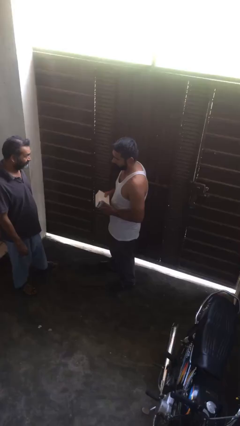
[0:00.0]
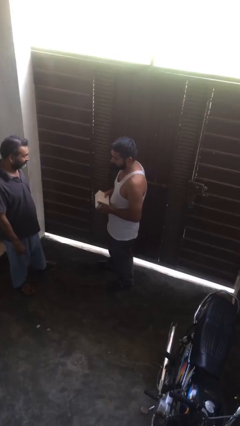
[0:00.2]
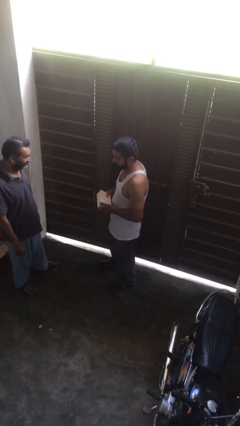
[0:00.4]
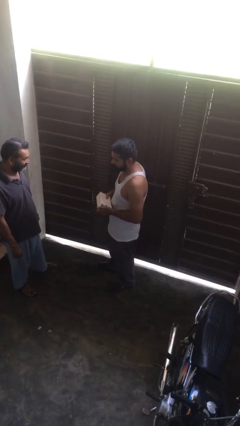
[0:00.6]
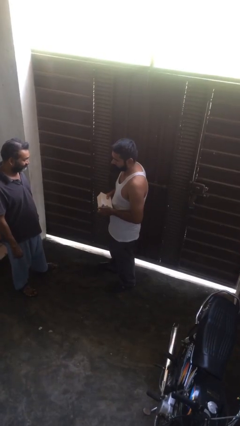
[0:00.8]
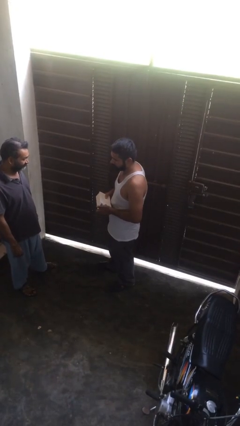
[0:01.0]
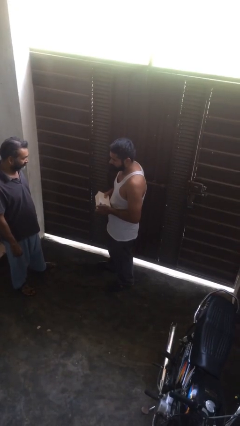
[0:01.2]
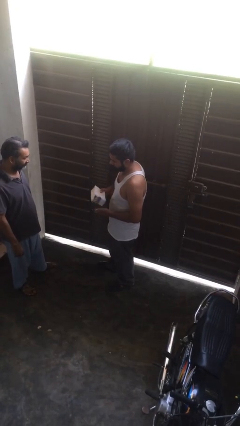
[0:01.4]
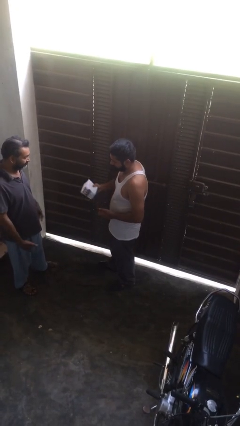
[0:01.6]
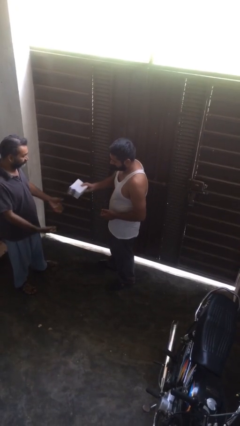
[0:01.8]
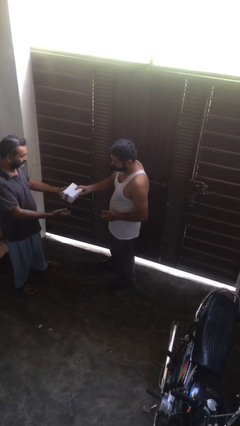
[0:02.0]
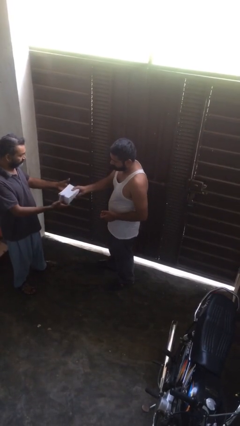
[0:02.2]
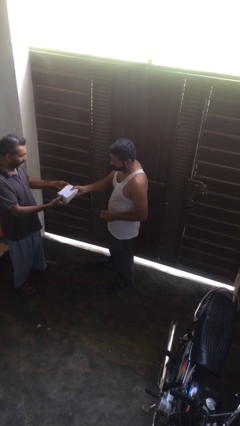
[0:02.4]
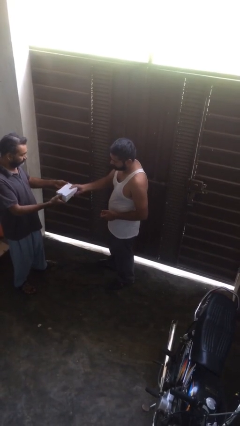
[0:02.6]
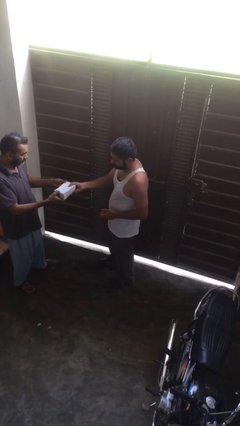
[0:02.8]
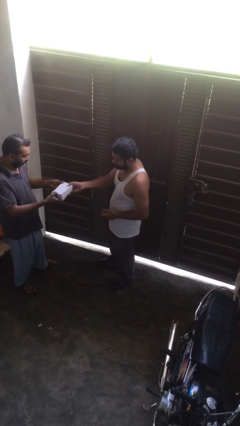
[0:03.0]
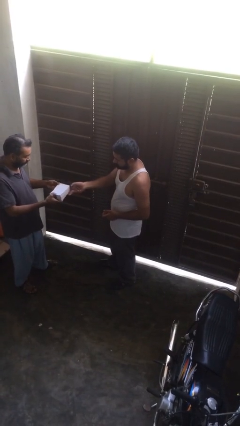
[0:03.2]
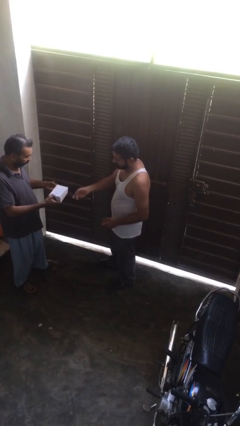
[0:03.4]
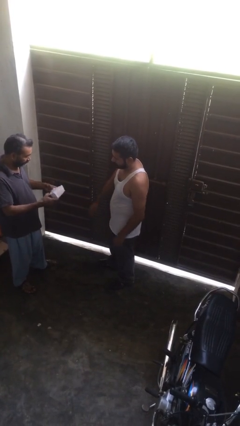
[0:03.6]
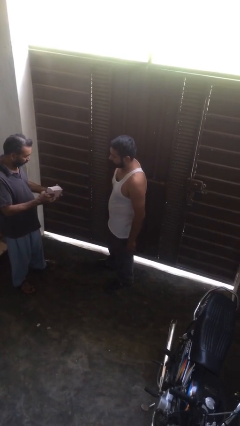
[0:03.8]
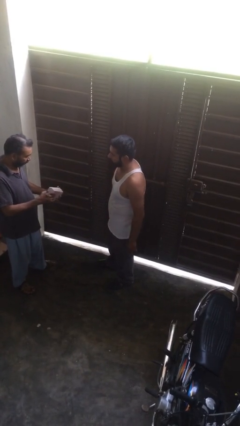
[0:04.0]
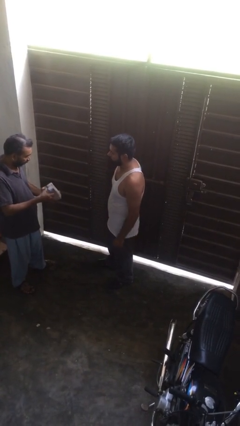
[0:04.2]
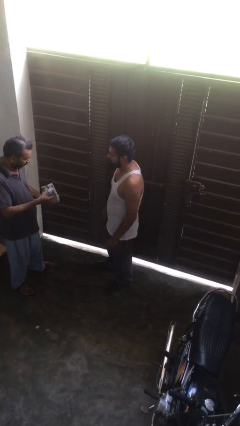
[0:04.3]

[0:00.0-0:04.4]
person transfers object to person

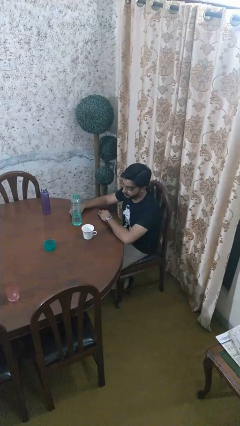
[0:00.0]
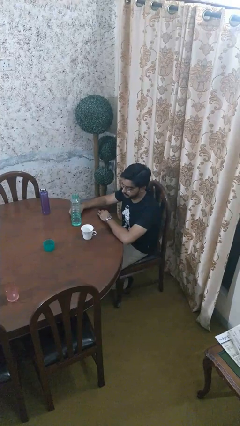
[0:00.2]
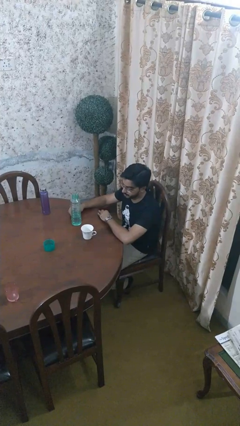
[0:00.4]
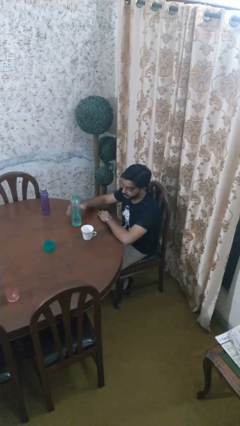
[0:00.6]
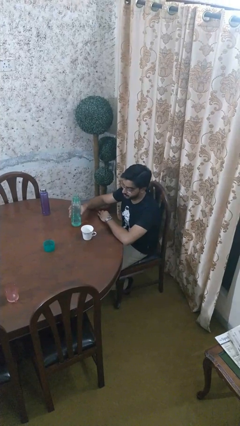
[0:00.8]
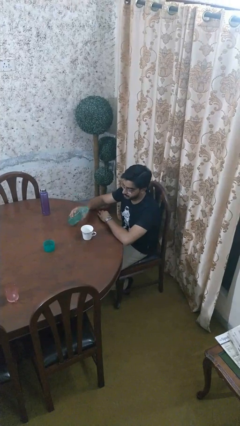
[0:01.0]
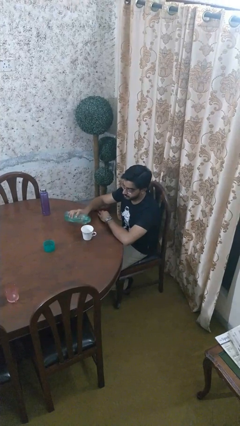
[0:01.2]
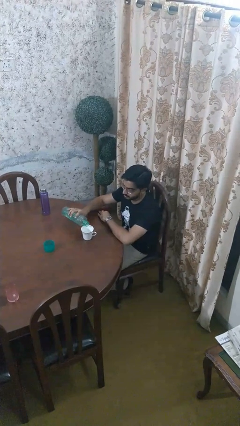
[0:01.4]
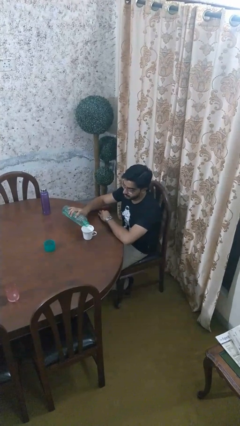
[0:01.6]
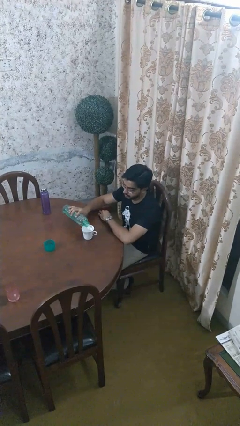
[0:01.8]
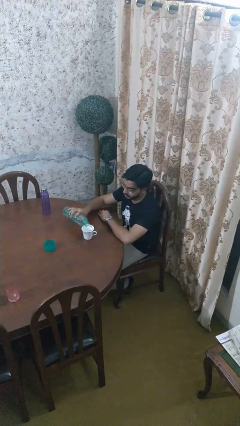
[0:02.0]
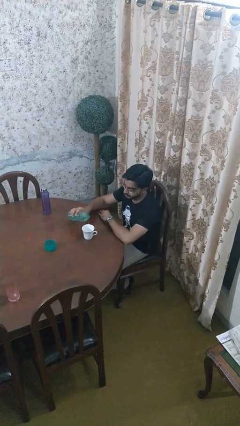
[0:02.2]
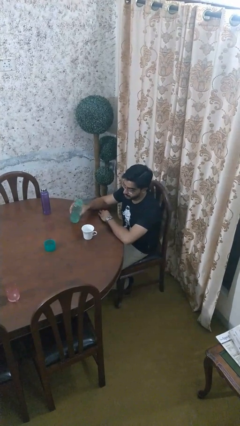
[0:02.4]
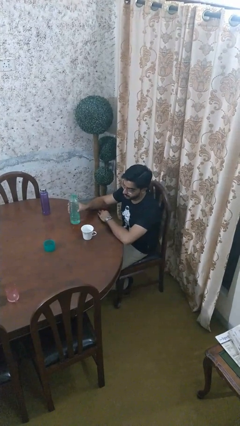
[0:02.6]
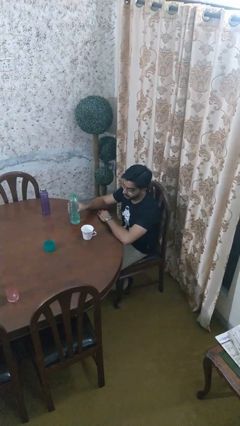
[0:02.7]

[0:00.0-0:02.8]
person pours liquid into cup

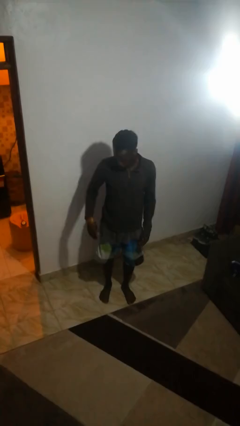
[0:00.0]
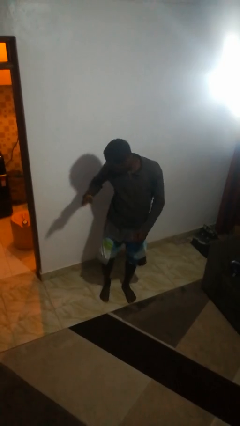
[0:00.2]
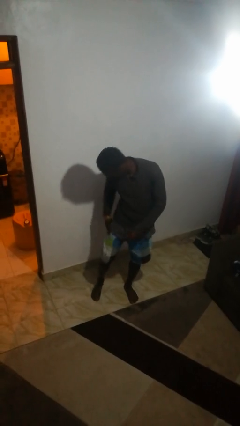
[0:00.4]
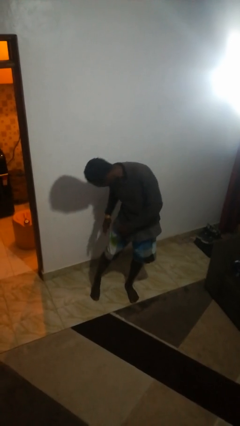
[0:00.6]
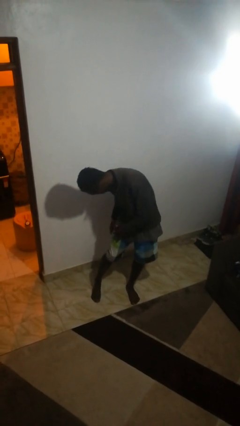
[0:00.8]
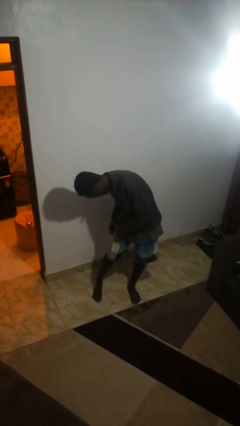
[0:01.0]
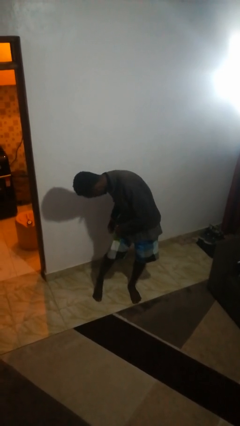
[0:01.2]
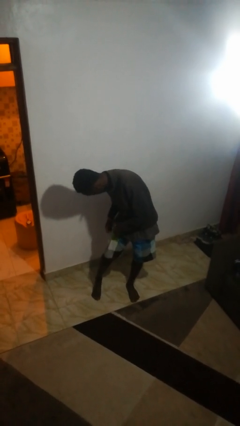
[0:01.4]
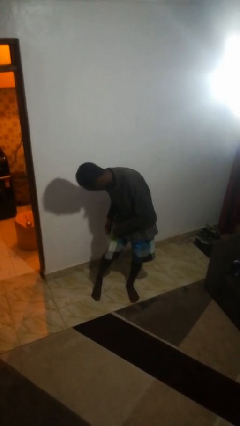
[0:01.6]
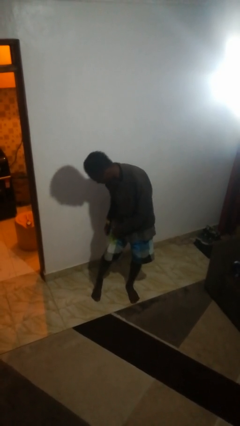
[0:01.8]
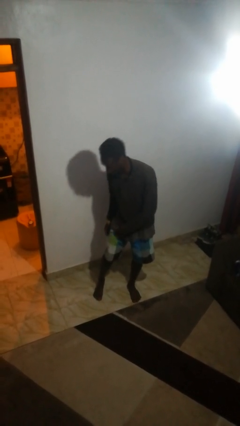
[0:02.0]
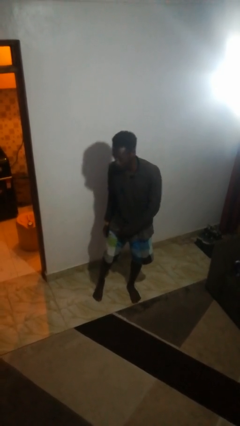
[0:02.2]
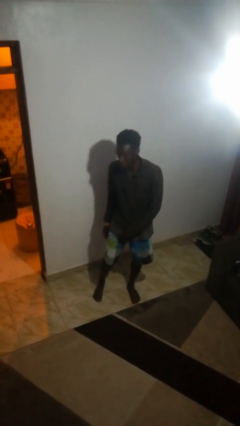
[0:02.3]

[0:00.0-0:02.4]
person swats bug

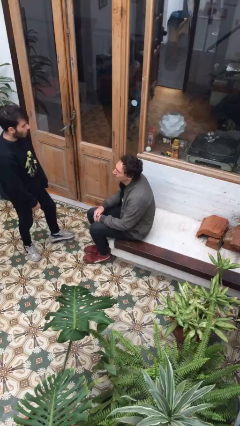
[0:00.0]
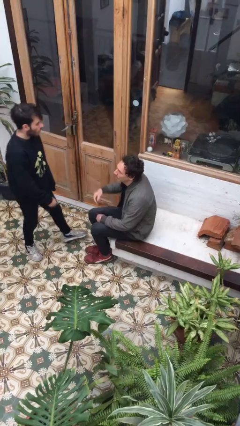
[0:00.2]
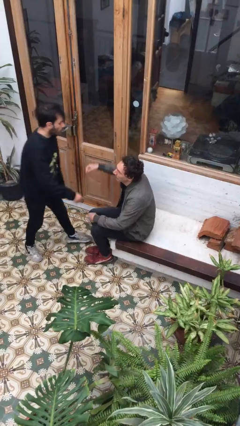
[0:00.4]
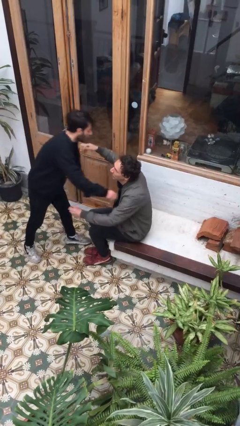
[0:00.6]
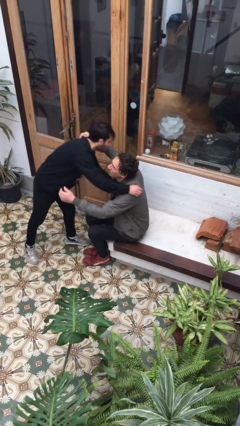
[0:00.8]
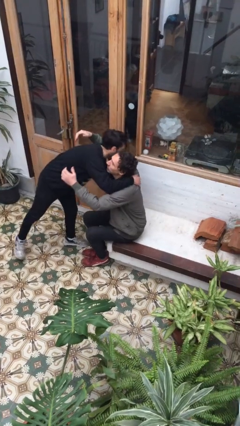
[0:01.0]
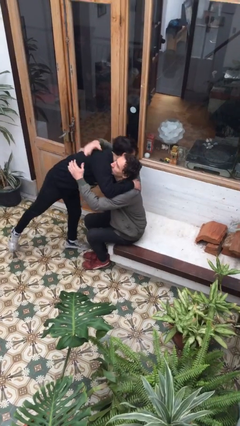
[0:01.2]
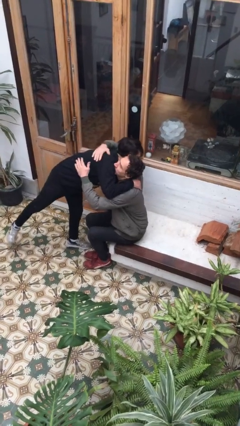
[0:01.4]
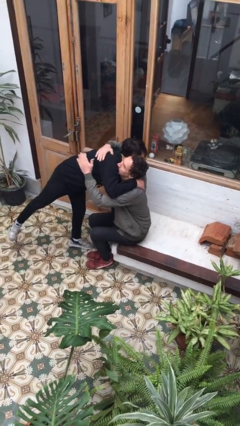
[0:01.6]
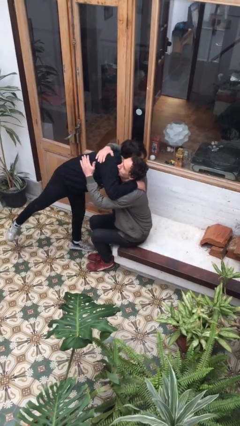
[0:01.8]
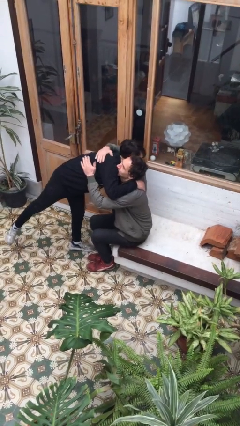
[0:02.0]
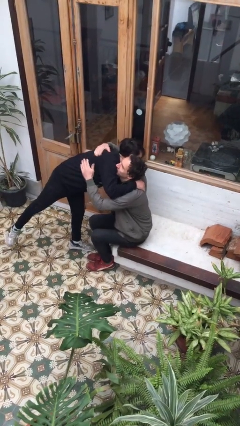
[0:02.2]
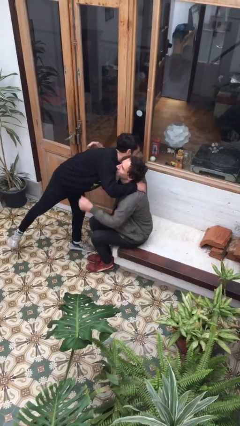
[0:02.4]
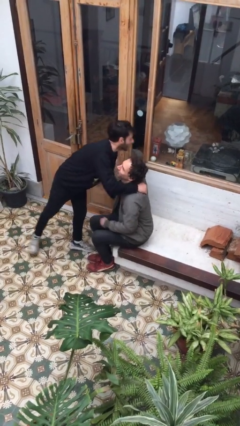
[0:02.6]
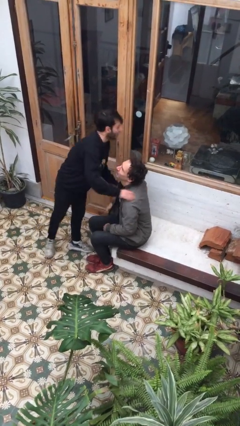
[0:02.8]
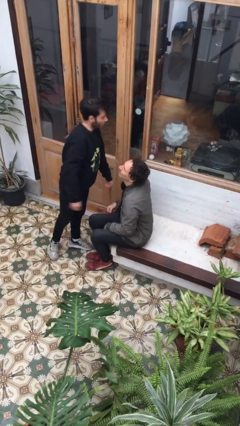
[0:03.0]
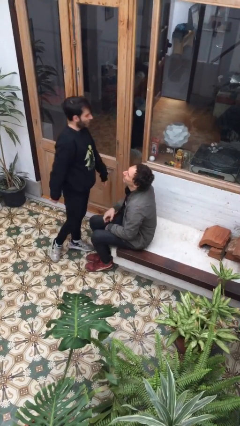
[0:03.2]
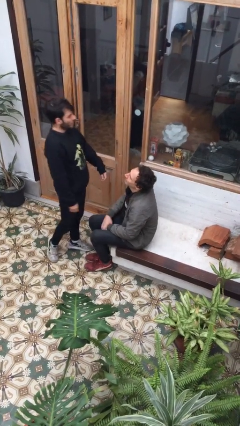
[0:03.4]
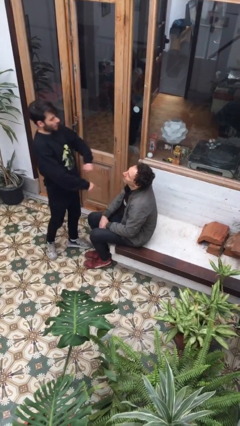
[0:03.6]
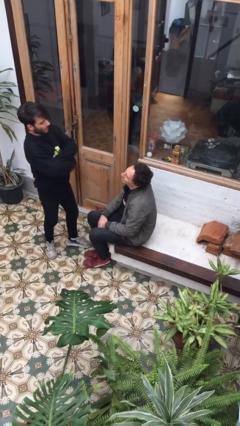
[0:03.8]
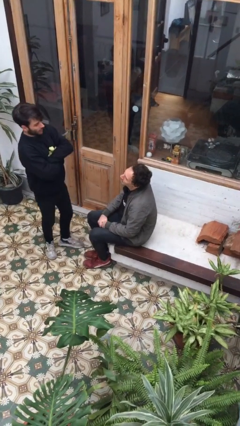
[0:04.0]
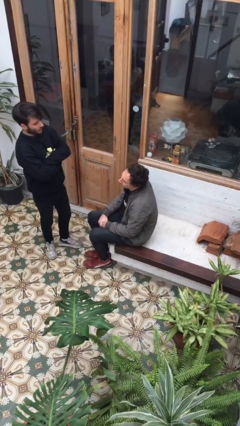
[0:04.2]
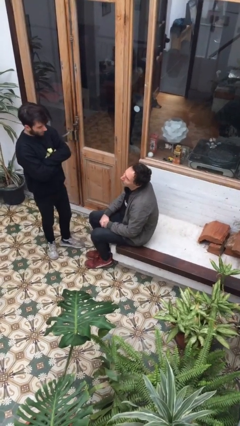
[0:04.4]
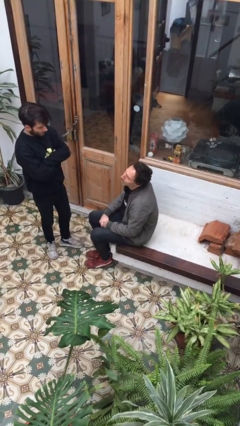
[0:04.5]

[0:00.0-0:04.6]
person embraces person

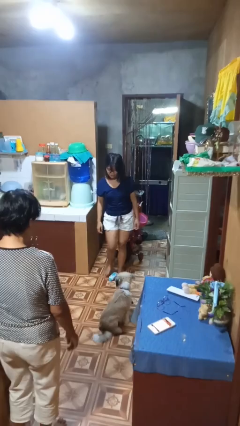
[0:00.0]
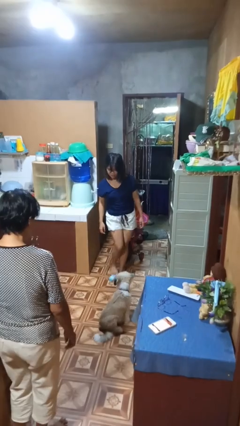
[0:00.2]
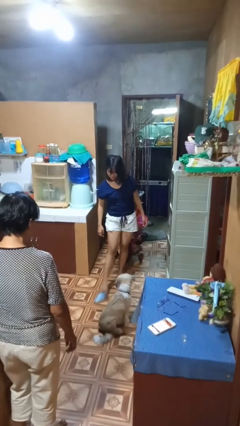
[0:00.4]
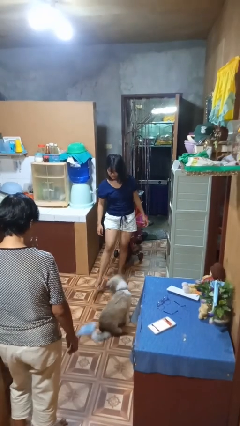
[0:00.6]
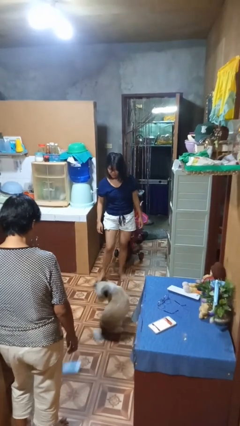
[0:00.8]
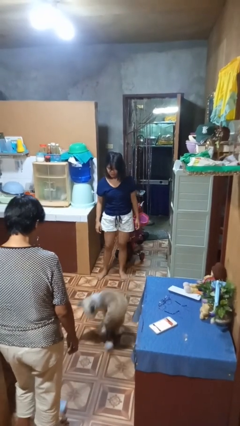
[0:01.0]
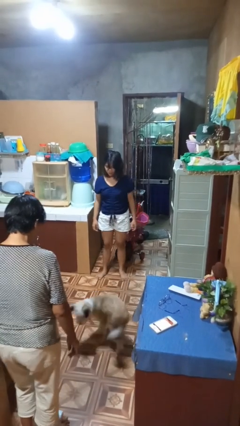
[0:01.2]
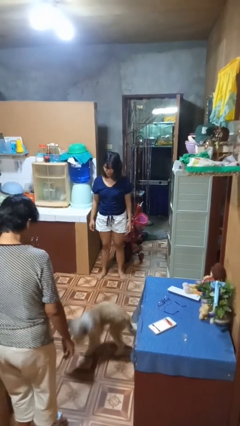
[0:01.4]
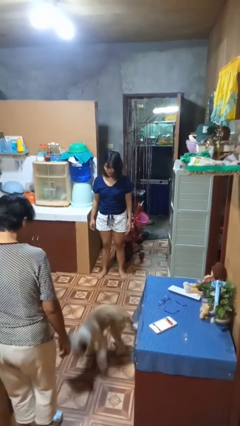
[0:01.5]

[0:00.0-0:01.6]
person kicks object to person

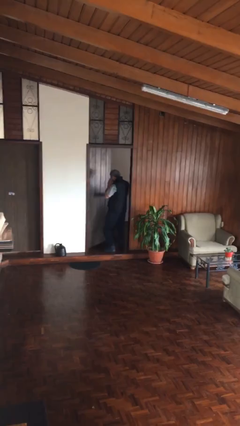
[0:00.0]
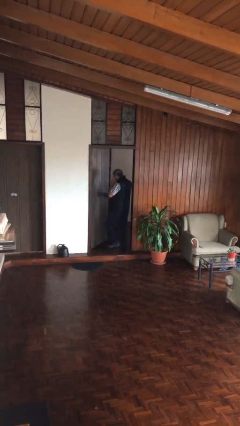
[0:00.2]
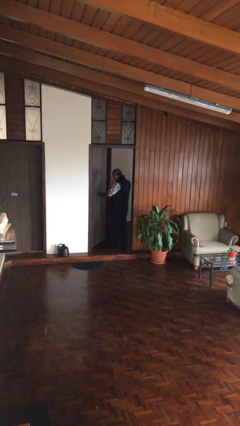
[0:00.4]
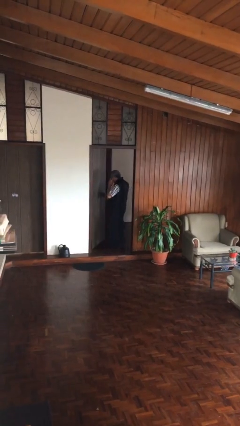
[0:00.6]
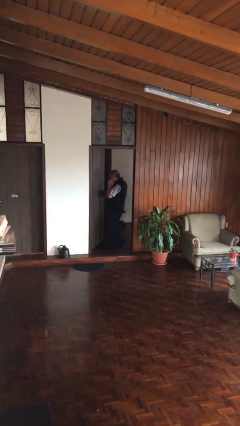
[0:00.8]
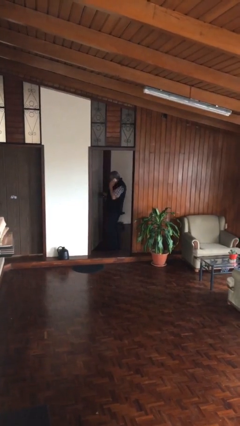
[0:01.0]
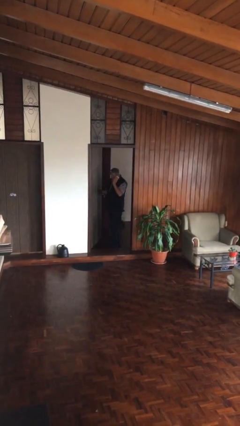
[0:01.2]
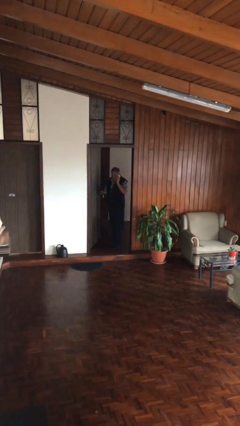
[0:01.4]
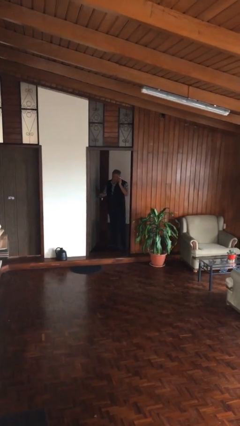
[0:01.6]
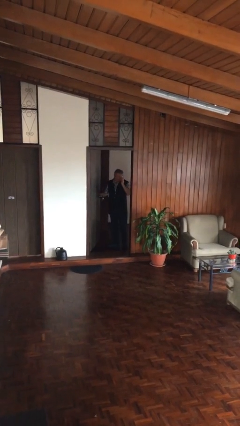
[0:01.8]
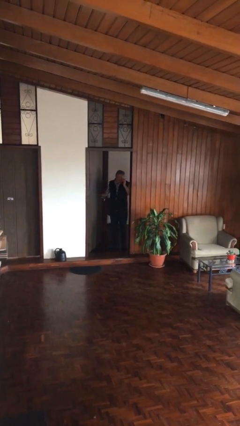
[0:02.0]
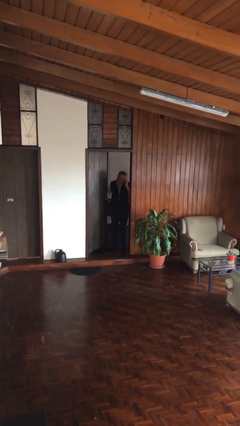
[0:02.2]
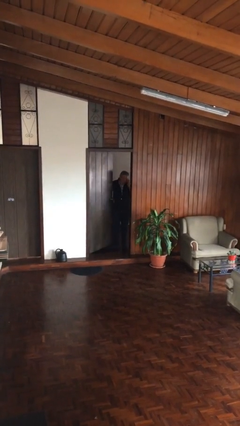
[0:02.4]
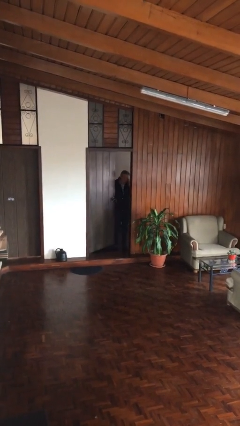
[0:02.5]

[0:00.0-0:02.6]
person exits scene through structure
